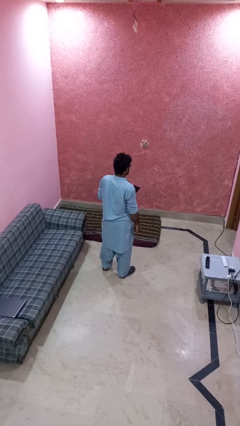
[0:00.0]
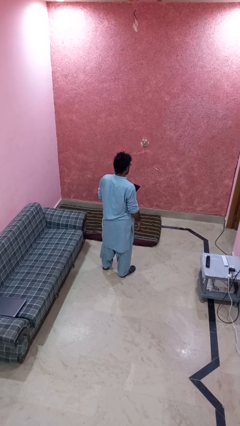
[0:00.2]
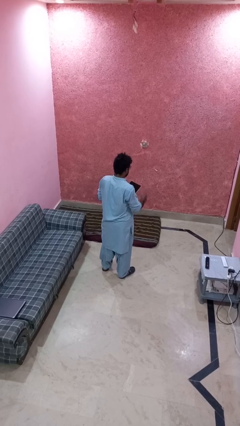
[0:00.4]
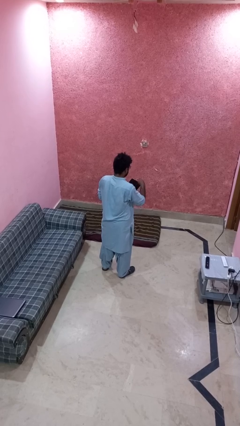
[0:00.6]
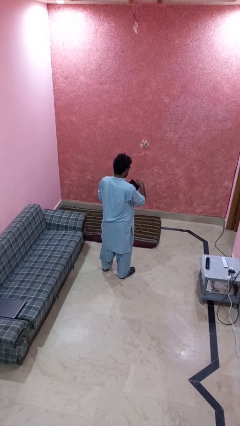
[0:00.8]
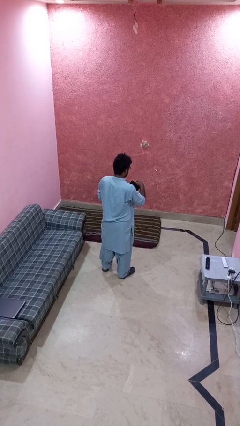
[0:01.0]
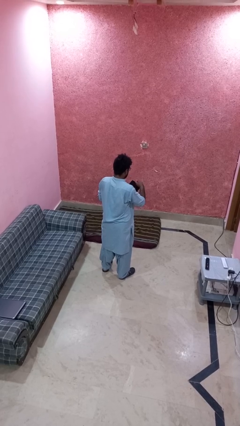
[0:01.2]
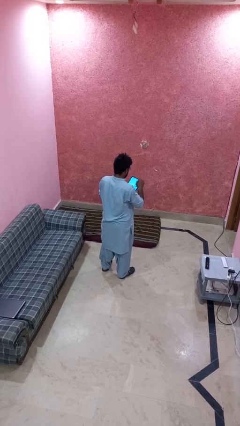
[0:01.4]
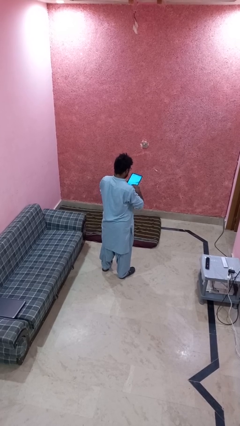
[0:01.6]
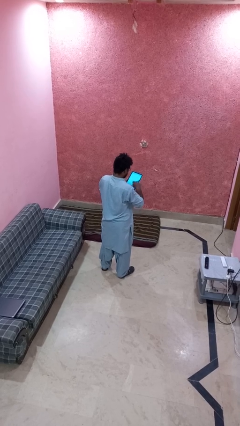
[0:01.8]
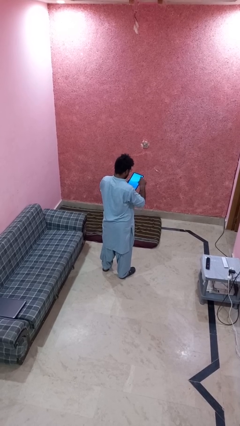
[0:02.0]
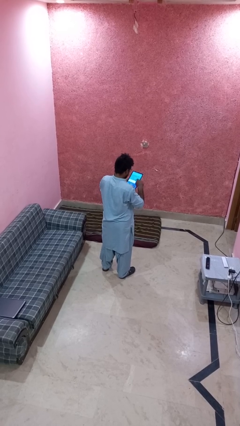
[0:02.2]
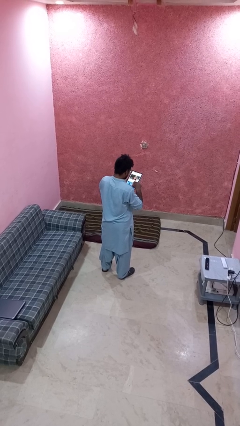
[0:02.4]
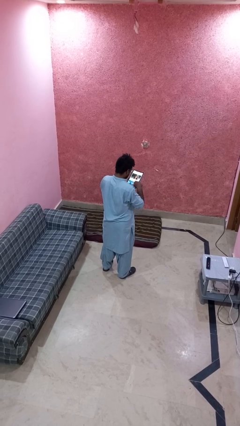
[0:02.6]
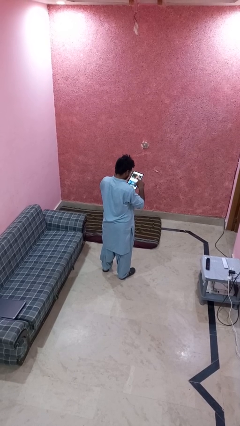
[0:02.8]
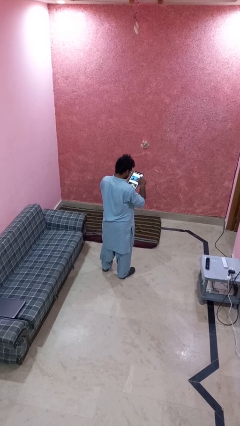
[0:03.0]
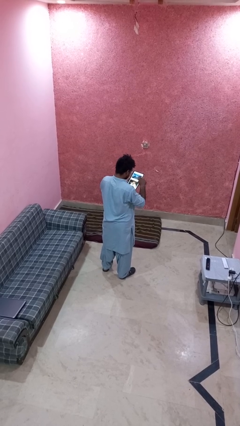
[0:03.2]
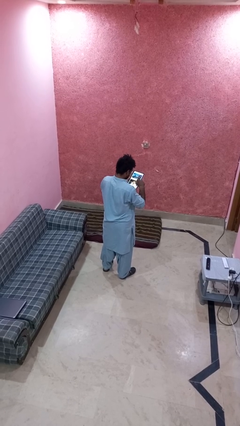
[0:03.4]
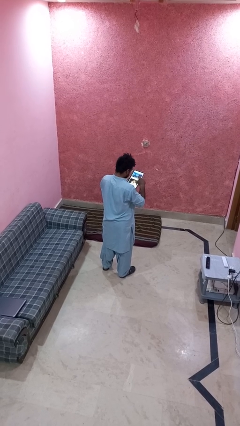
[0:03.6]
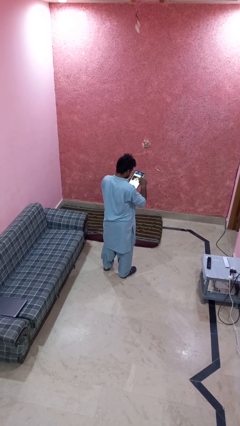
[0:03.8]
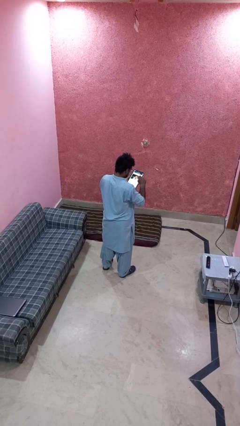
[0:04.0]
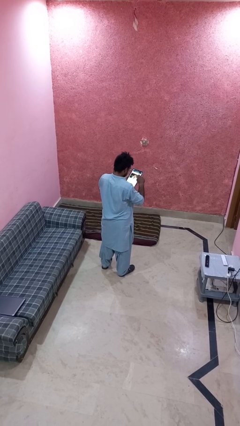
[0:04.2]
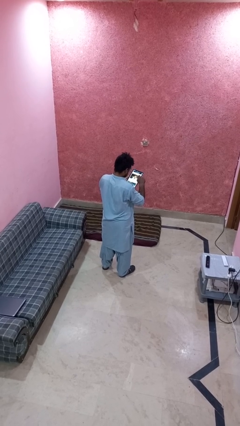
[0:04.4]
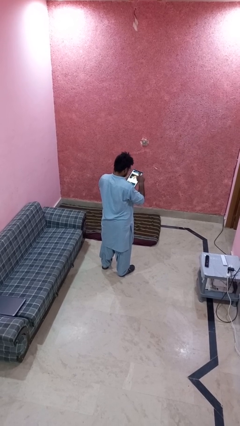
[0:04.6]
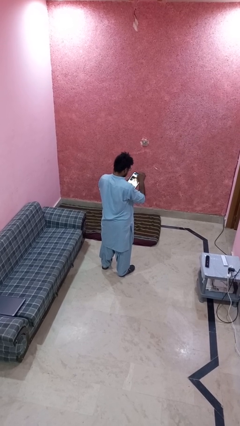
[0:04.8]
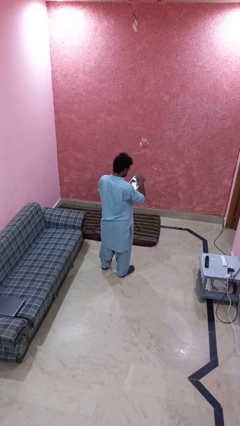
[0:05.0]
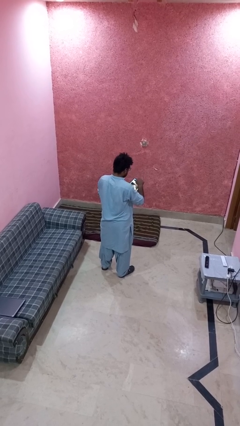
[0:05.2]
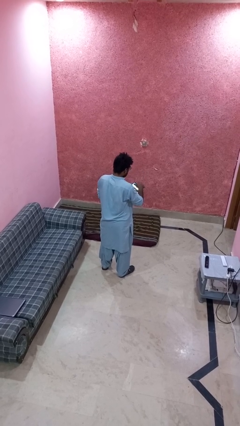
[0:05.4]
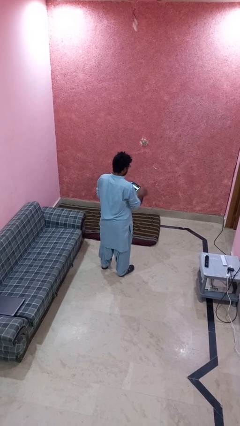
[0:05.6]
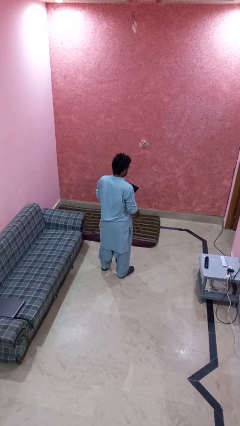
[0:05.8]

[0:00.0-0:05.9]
person interacts with tablet

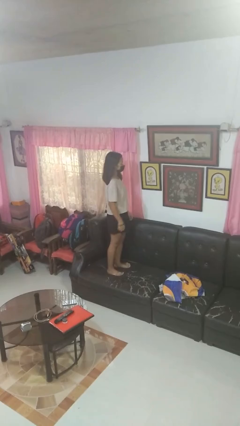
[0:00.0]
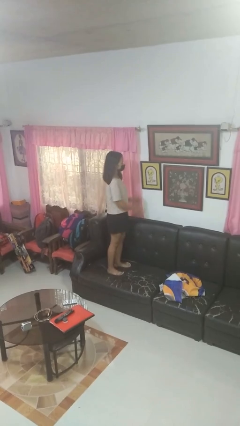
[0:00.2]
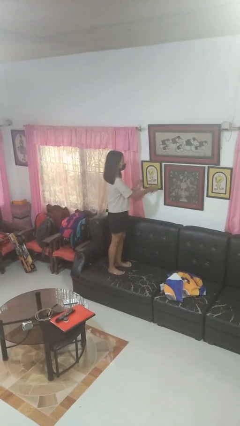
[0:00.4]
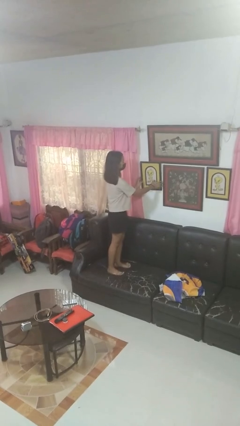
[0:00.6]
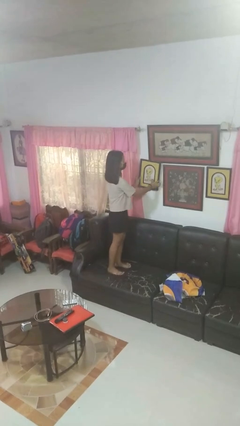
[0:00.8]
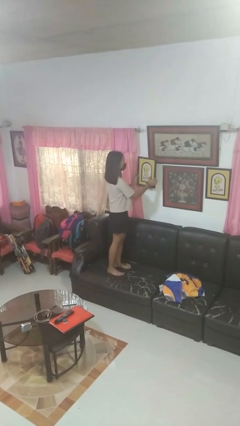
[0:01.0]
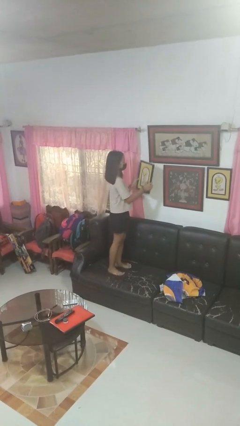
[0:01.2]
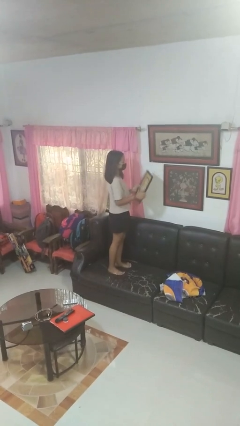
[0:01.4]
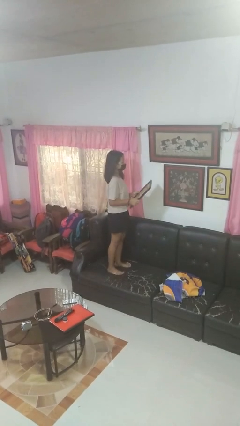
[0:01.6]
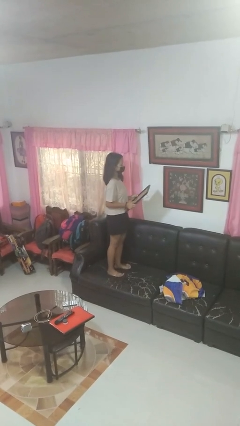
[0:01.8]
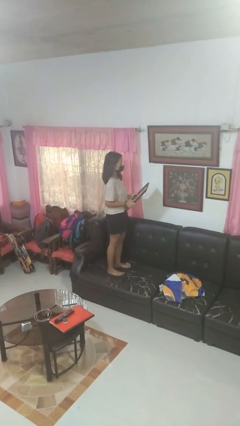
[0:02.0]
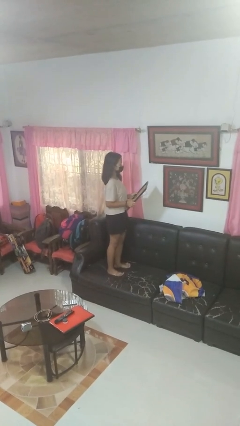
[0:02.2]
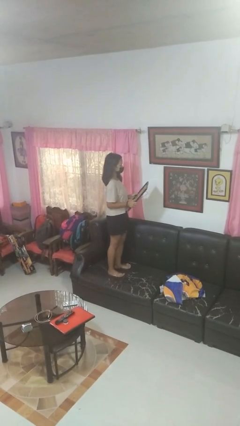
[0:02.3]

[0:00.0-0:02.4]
person takes down picture frame

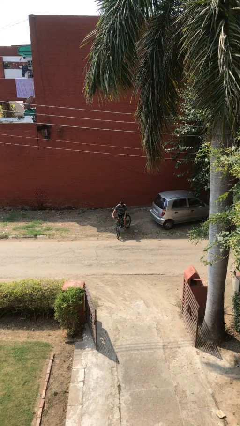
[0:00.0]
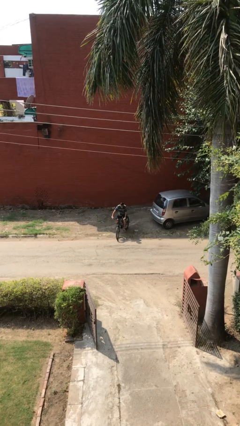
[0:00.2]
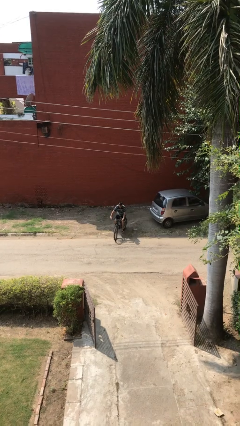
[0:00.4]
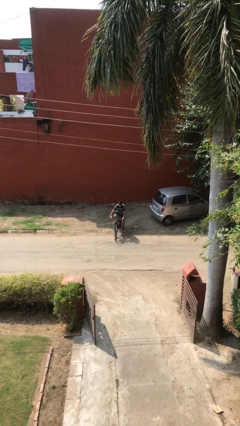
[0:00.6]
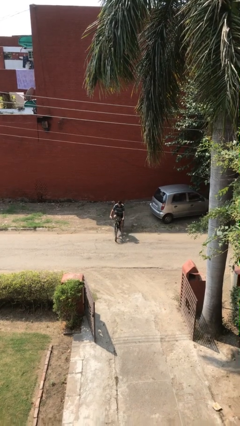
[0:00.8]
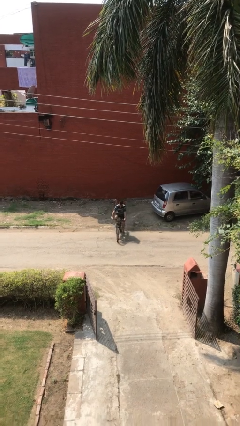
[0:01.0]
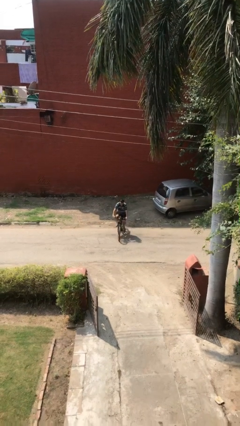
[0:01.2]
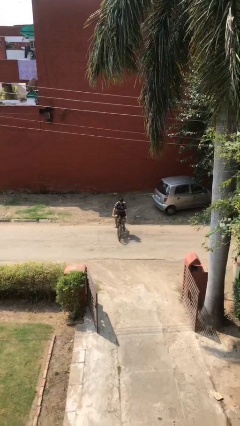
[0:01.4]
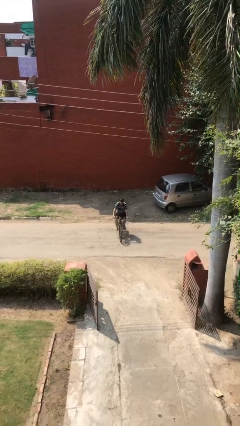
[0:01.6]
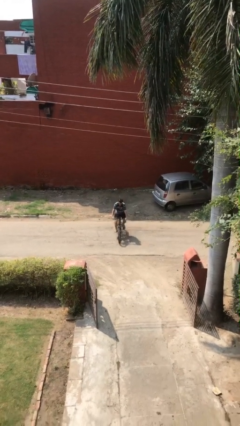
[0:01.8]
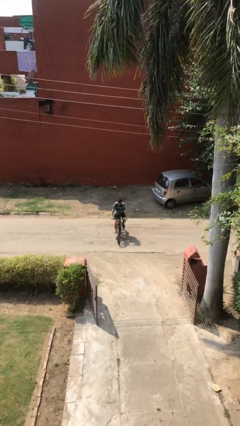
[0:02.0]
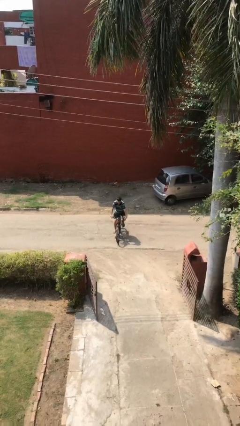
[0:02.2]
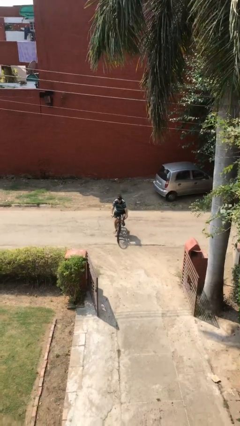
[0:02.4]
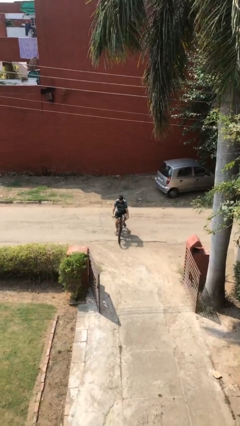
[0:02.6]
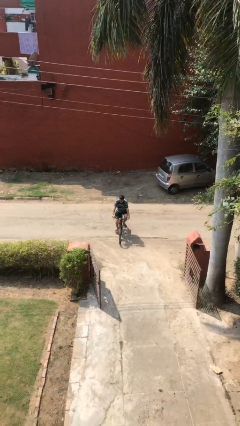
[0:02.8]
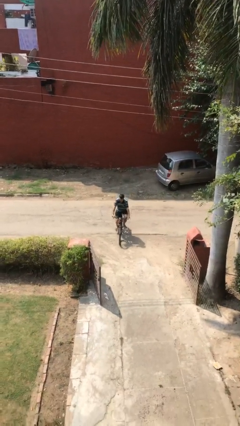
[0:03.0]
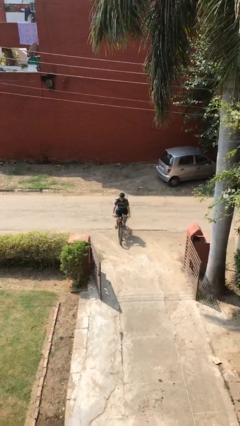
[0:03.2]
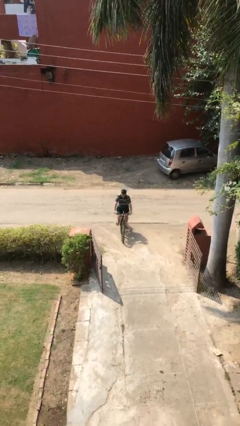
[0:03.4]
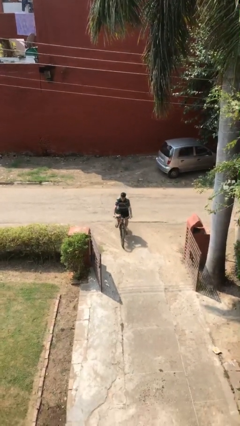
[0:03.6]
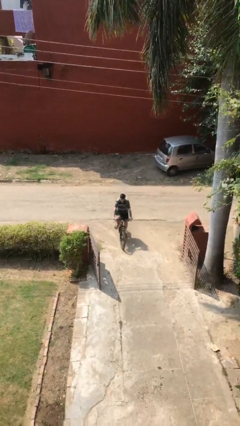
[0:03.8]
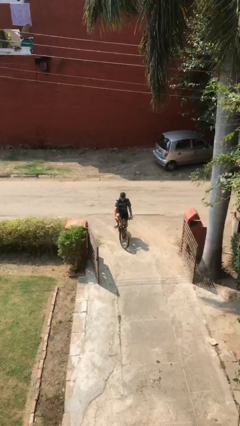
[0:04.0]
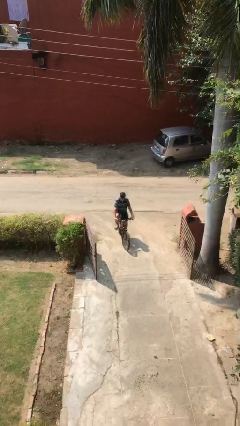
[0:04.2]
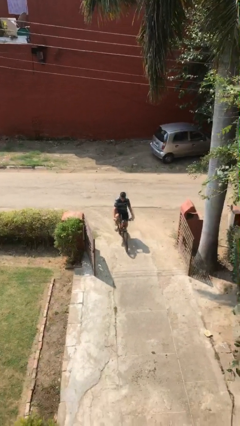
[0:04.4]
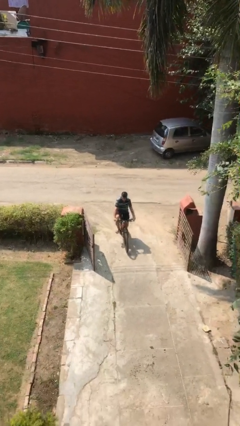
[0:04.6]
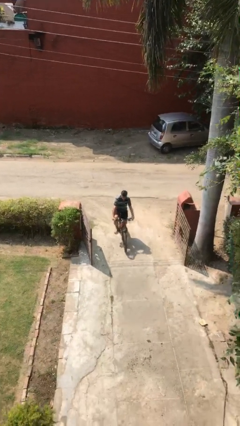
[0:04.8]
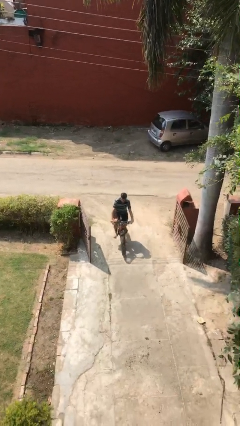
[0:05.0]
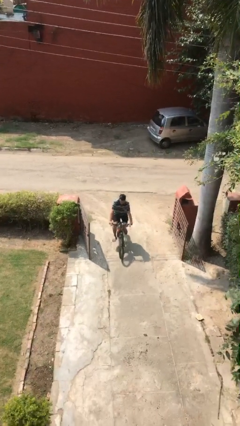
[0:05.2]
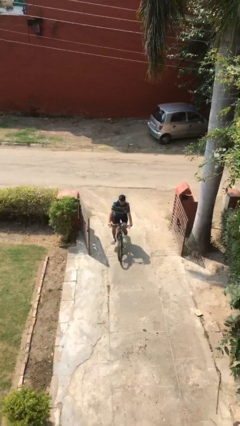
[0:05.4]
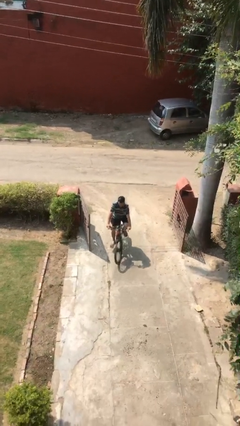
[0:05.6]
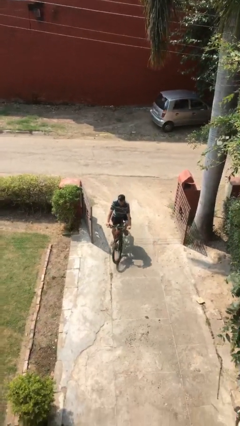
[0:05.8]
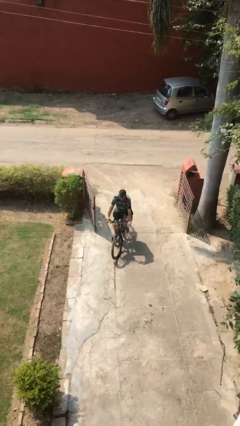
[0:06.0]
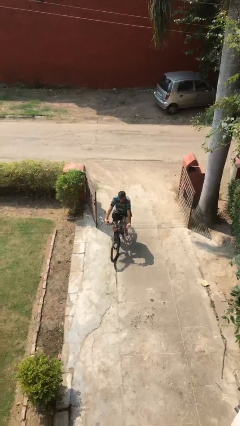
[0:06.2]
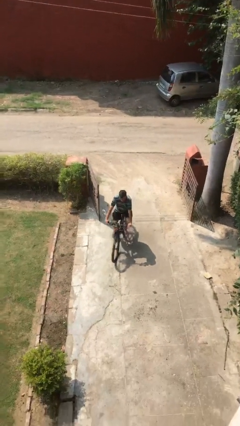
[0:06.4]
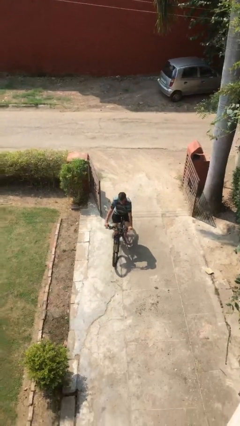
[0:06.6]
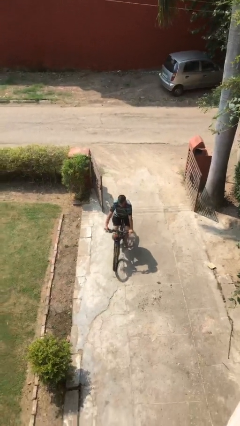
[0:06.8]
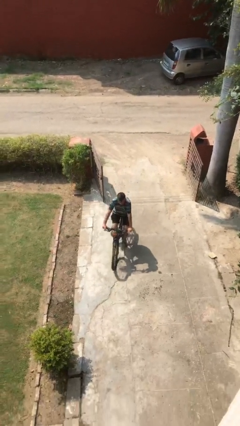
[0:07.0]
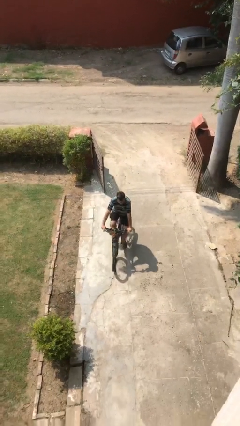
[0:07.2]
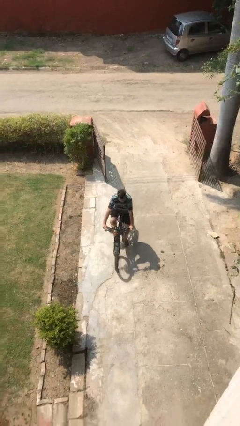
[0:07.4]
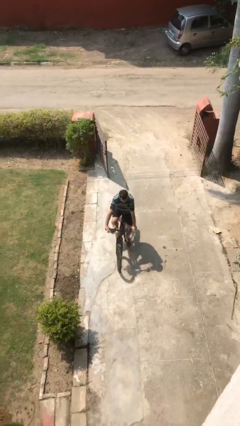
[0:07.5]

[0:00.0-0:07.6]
person rides bicycle

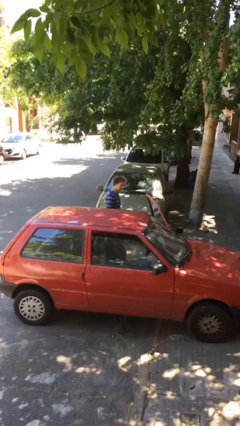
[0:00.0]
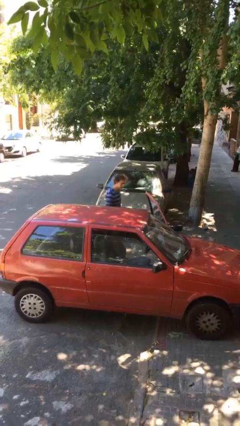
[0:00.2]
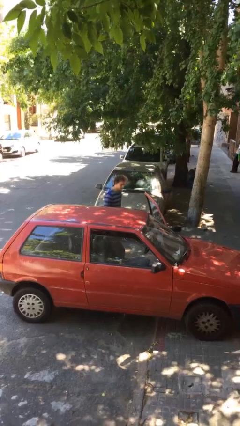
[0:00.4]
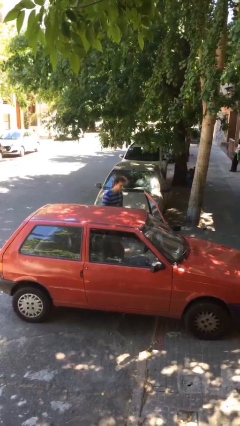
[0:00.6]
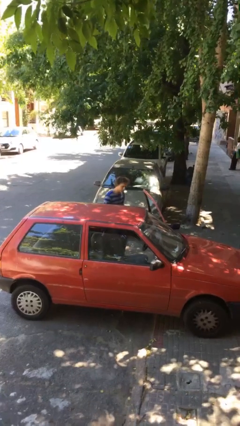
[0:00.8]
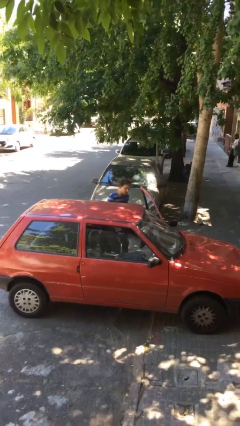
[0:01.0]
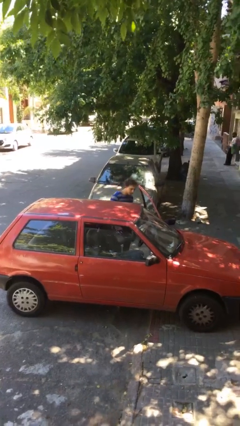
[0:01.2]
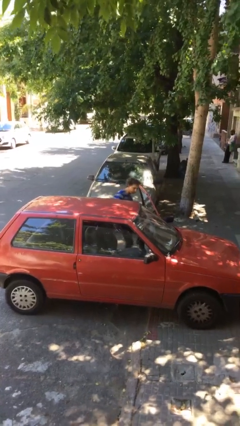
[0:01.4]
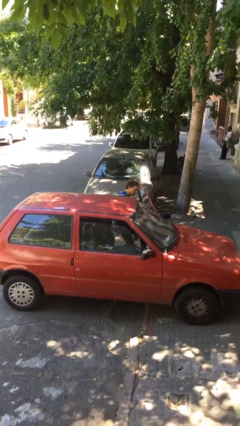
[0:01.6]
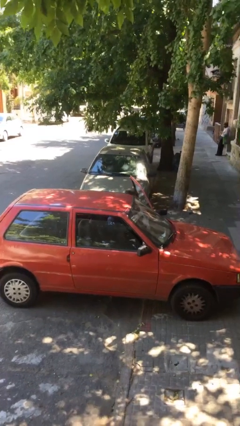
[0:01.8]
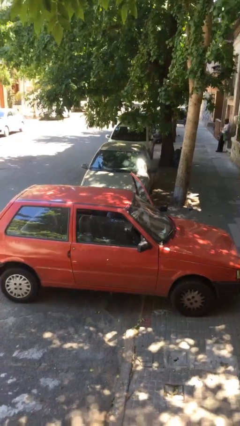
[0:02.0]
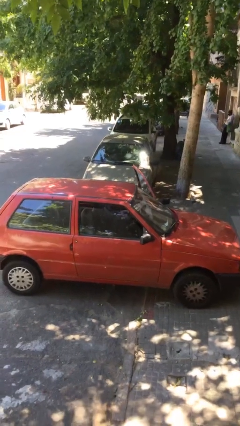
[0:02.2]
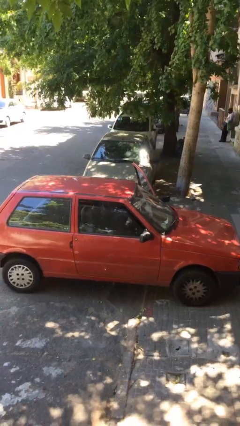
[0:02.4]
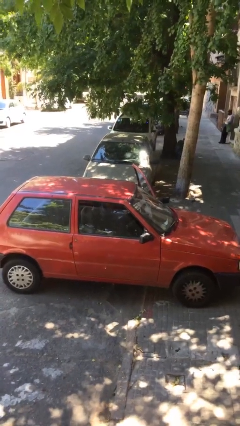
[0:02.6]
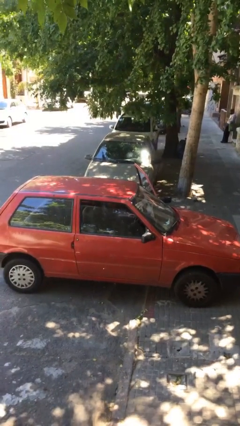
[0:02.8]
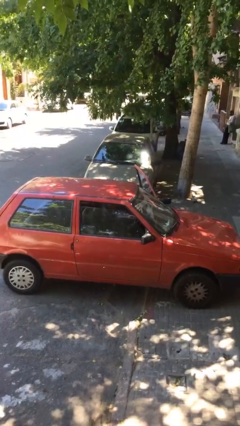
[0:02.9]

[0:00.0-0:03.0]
person enters car
